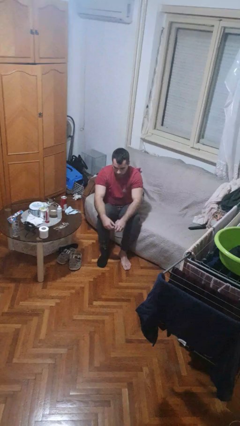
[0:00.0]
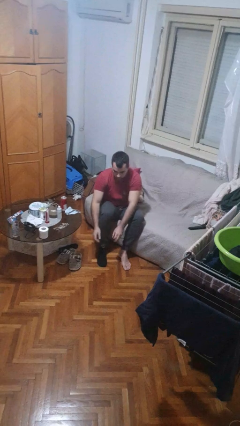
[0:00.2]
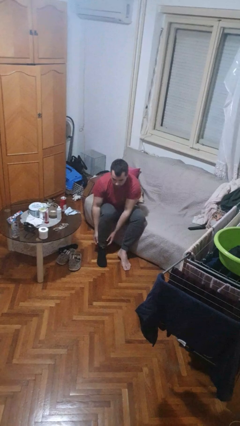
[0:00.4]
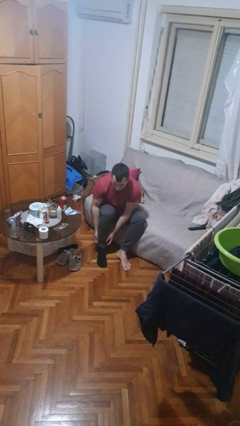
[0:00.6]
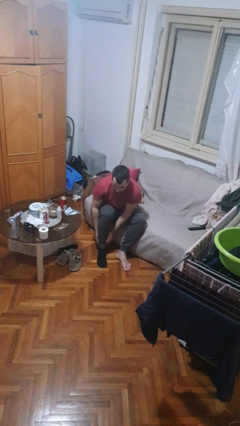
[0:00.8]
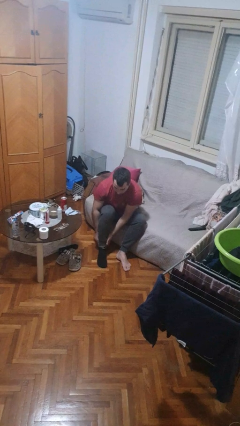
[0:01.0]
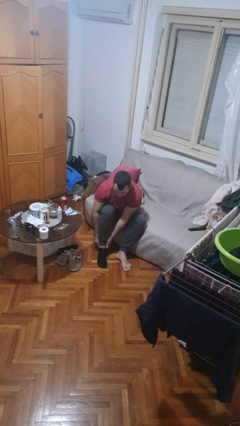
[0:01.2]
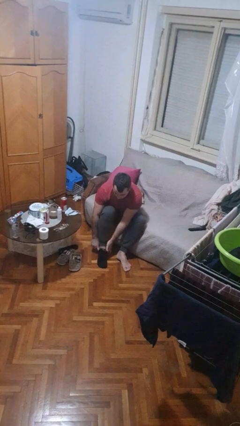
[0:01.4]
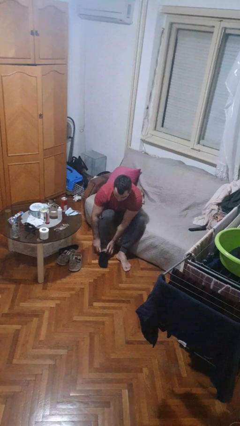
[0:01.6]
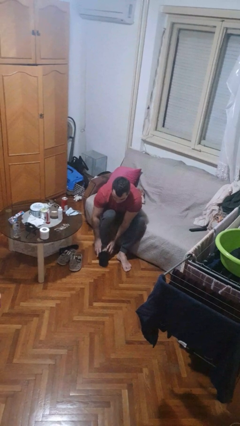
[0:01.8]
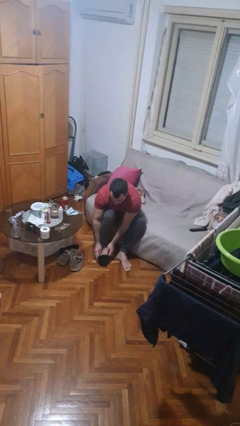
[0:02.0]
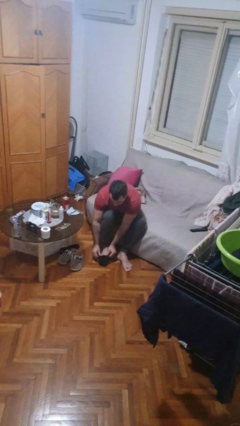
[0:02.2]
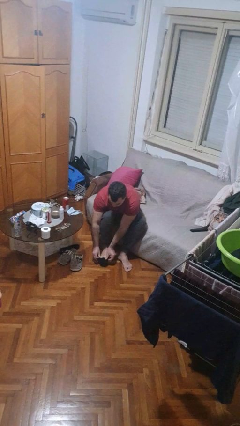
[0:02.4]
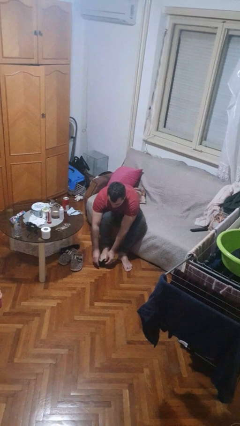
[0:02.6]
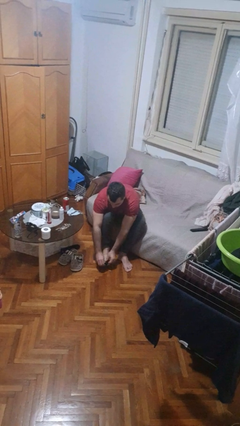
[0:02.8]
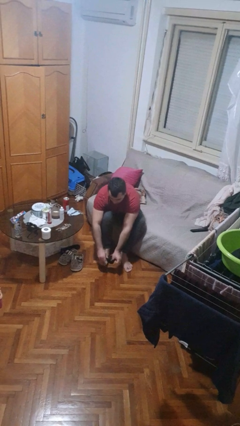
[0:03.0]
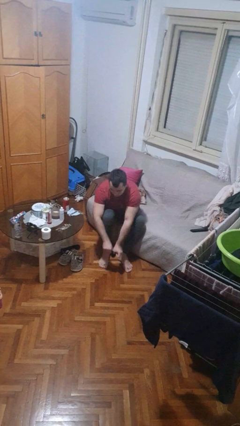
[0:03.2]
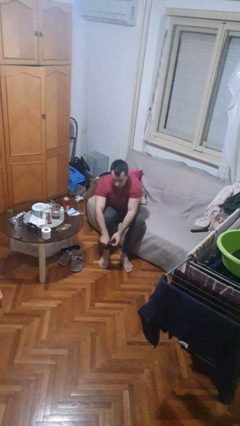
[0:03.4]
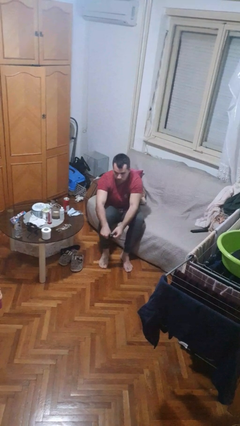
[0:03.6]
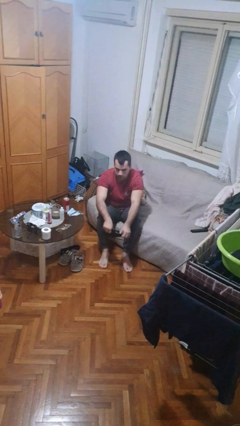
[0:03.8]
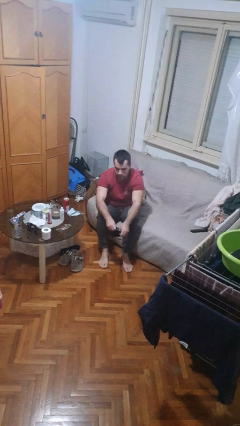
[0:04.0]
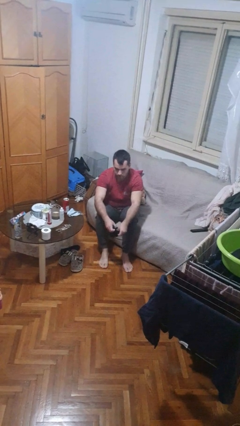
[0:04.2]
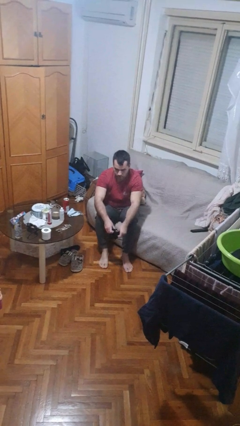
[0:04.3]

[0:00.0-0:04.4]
person takes off socks

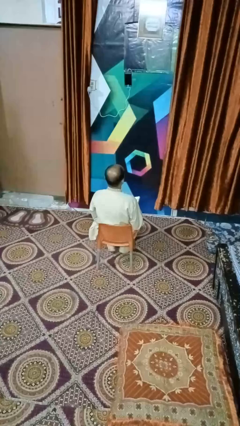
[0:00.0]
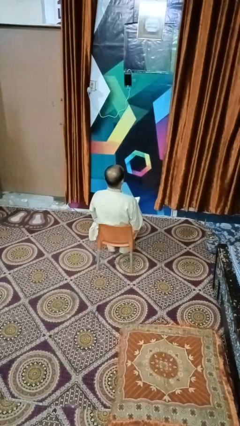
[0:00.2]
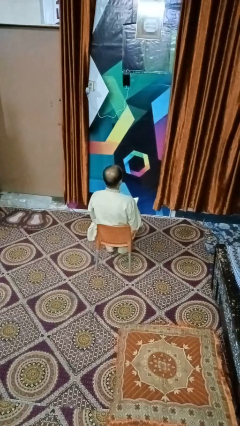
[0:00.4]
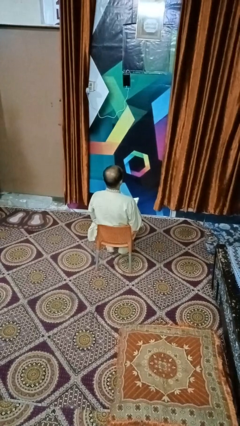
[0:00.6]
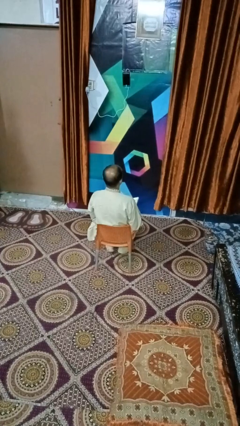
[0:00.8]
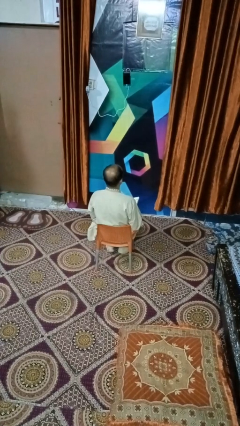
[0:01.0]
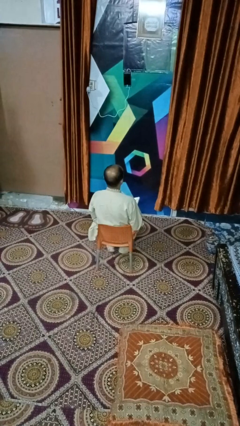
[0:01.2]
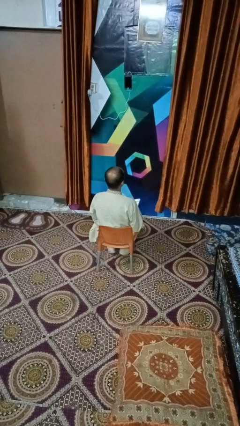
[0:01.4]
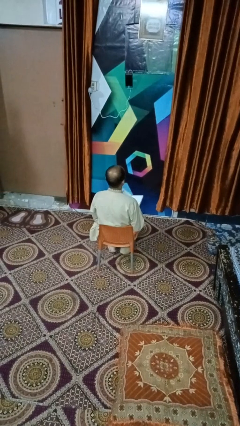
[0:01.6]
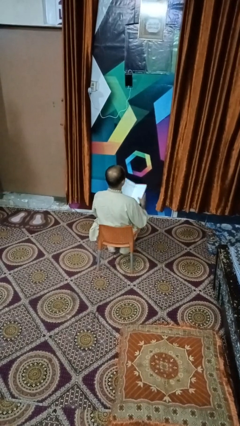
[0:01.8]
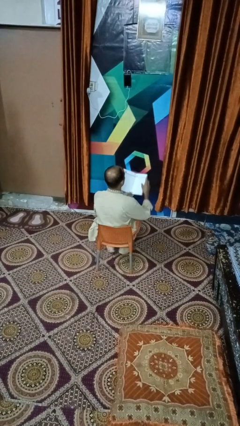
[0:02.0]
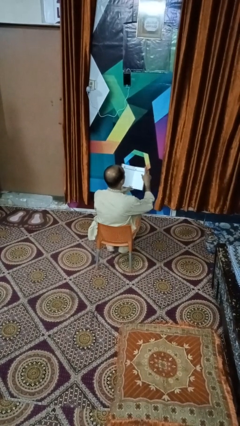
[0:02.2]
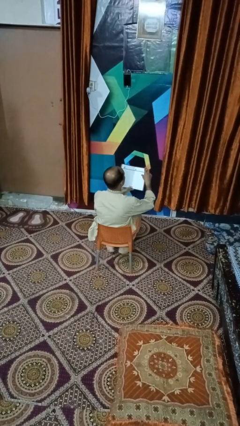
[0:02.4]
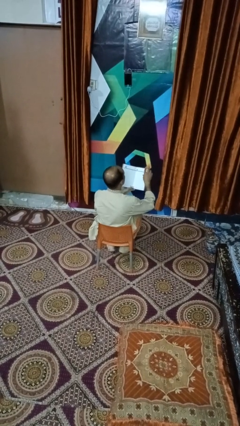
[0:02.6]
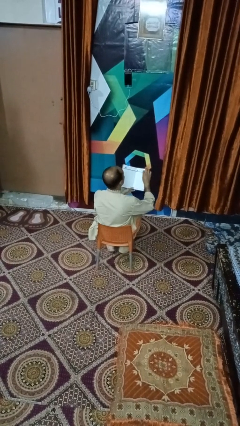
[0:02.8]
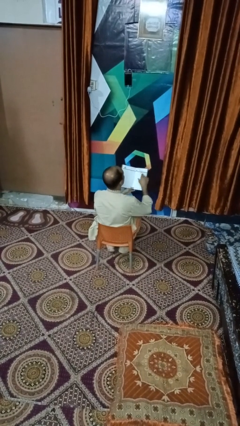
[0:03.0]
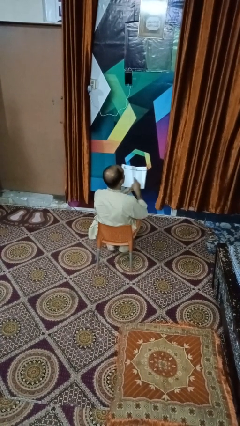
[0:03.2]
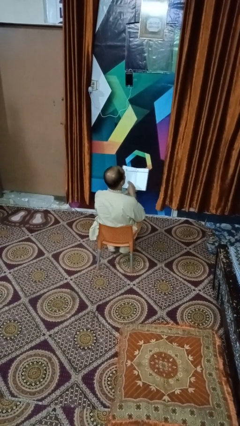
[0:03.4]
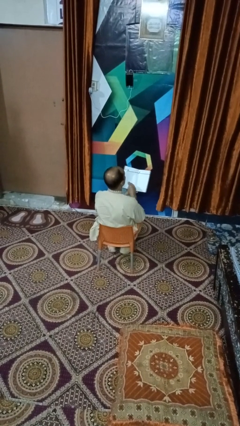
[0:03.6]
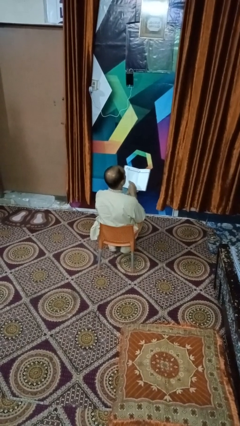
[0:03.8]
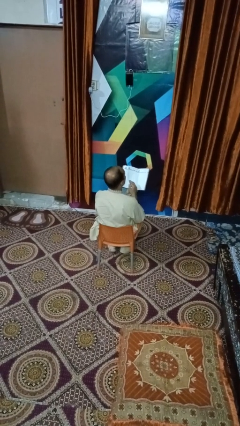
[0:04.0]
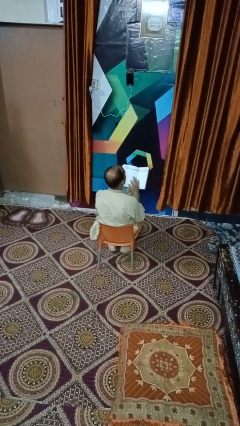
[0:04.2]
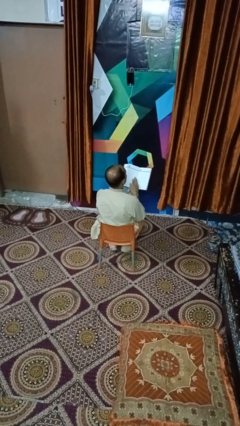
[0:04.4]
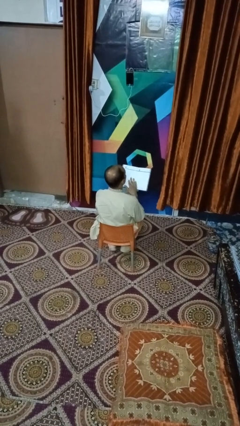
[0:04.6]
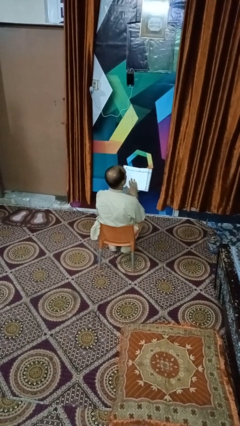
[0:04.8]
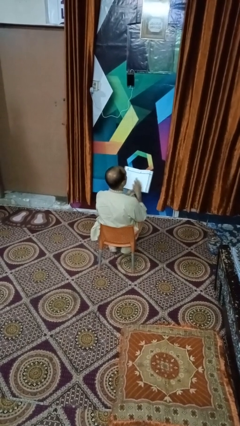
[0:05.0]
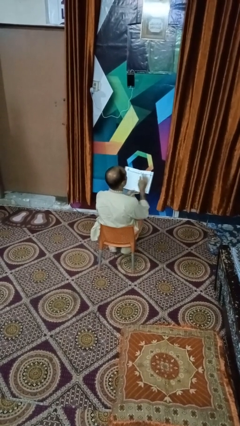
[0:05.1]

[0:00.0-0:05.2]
person reads magazine

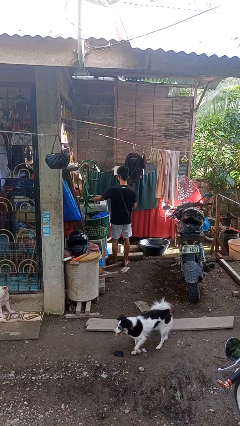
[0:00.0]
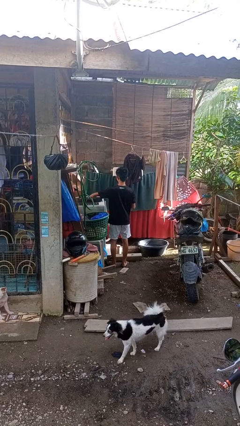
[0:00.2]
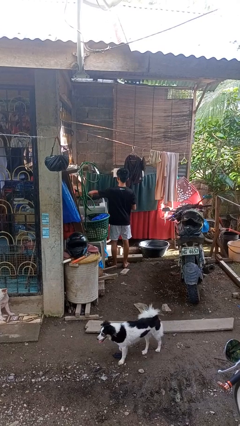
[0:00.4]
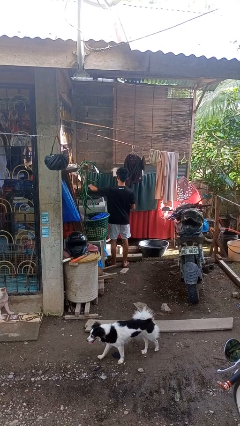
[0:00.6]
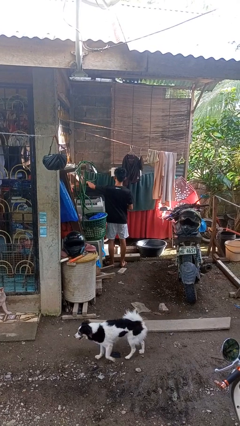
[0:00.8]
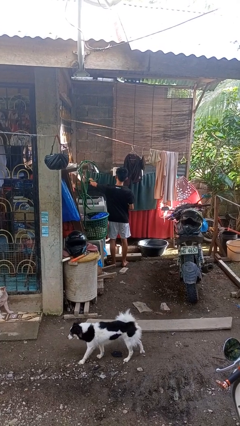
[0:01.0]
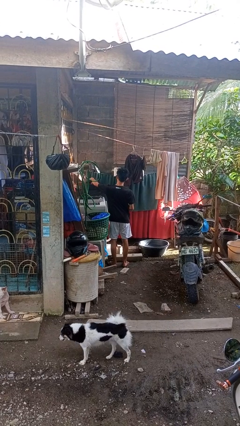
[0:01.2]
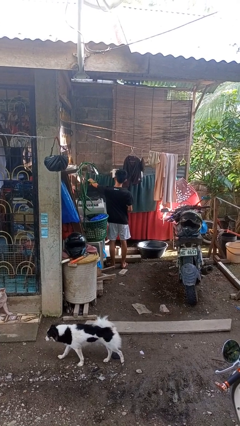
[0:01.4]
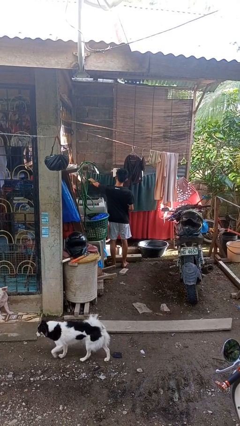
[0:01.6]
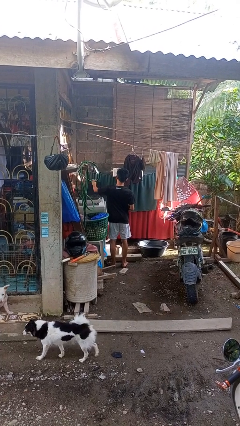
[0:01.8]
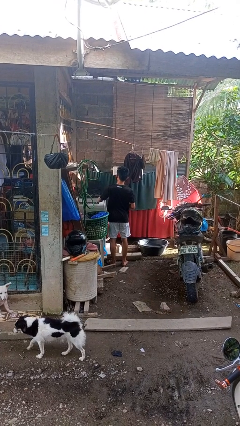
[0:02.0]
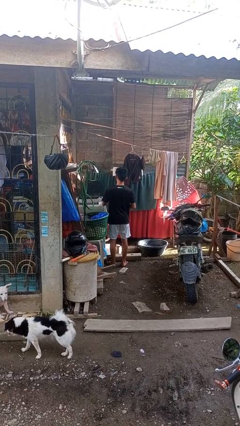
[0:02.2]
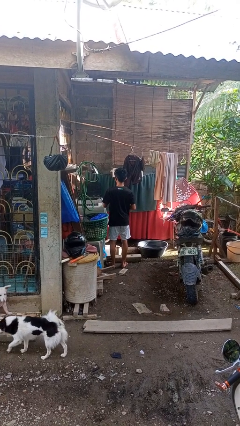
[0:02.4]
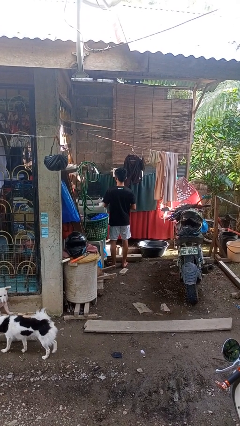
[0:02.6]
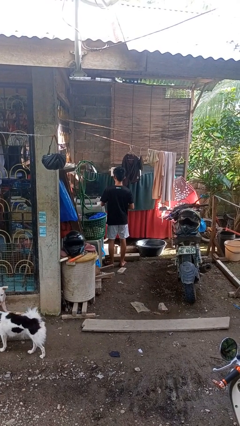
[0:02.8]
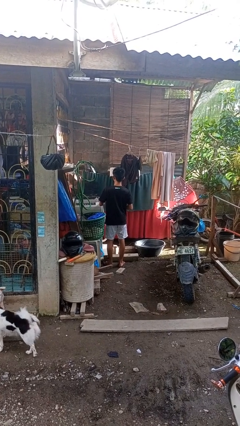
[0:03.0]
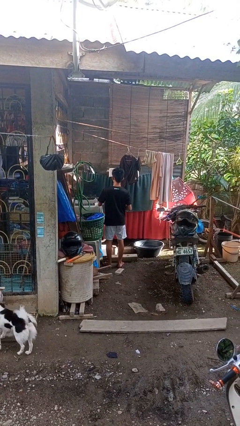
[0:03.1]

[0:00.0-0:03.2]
person opens clothes washer

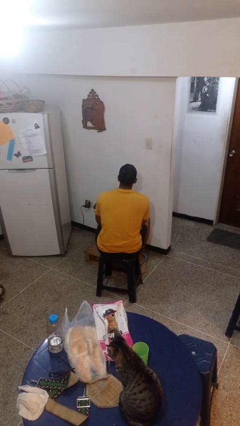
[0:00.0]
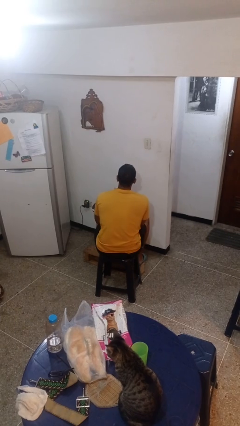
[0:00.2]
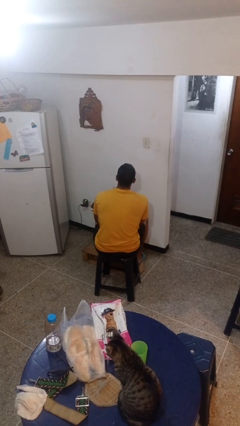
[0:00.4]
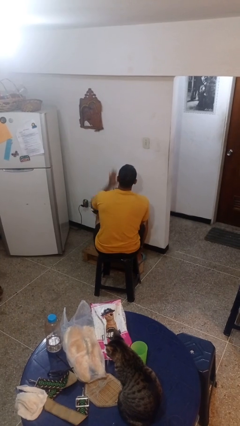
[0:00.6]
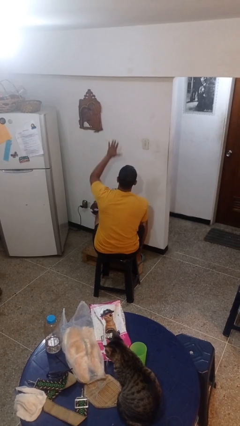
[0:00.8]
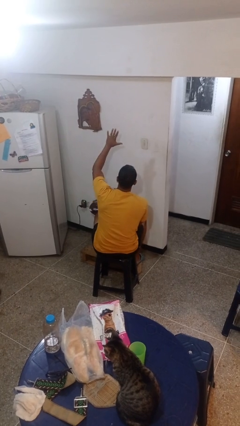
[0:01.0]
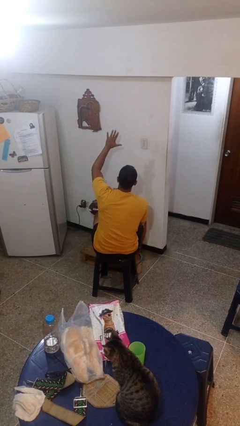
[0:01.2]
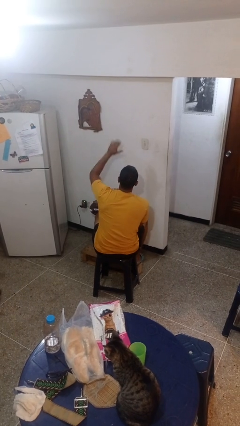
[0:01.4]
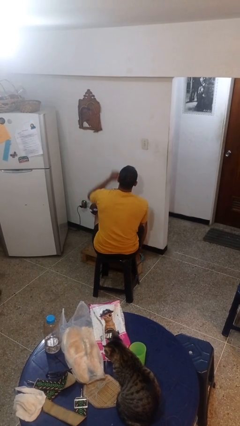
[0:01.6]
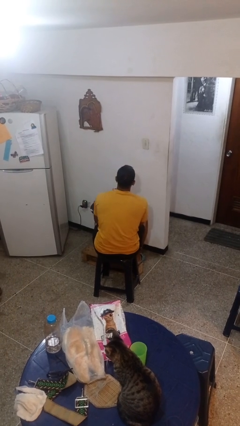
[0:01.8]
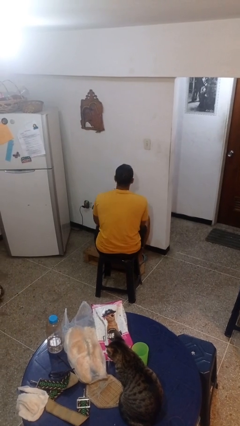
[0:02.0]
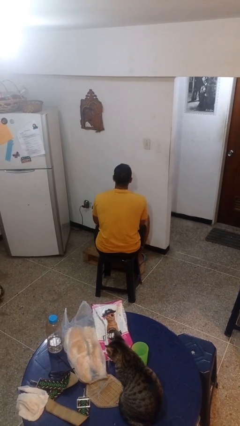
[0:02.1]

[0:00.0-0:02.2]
person gestures number five

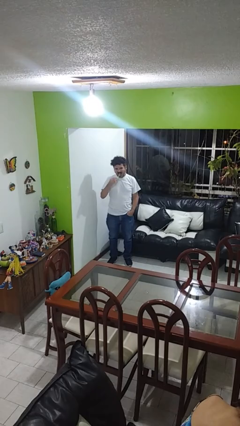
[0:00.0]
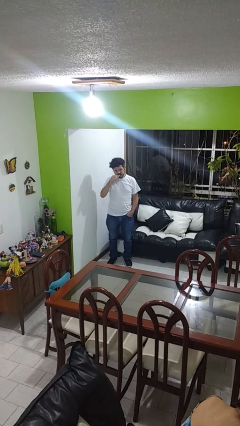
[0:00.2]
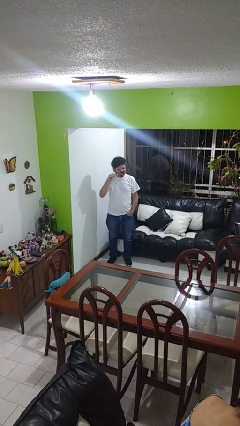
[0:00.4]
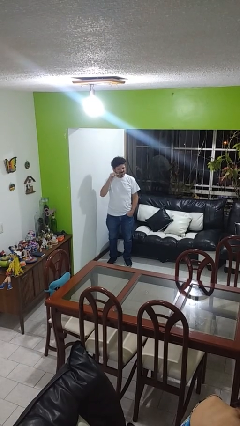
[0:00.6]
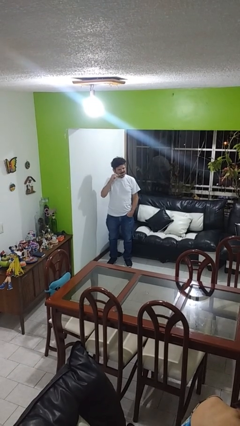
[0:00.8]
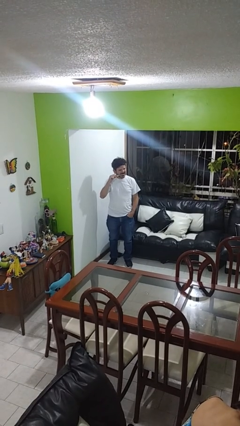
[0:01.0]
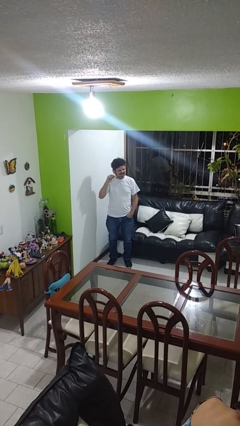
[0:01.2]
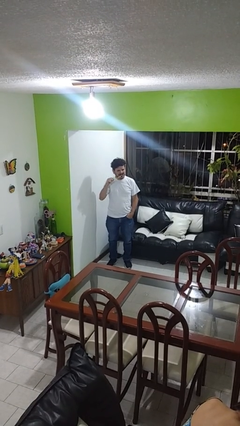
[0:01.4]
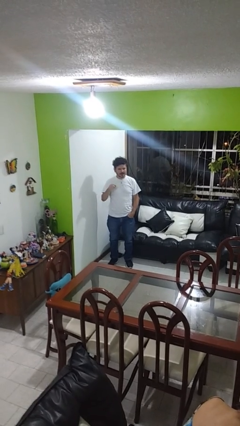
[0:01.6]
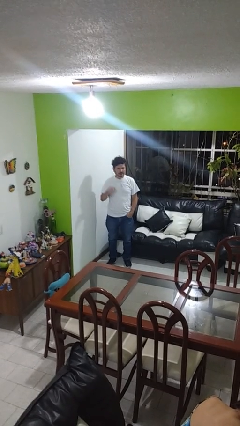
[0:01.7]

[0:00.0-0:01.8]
person brushes teeth

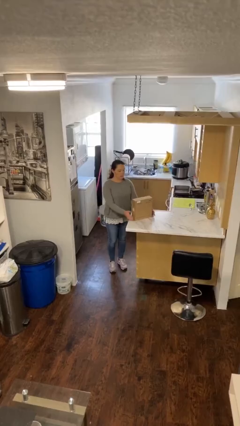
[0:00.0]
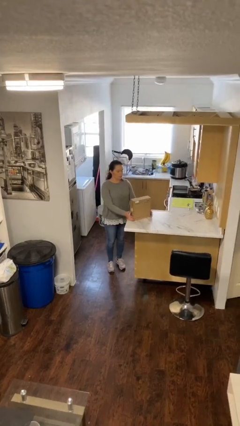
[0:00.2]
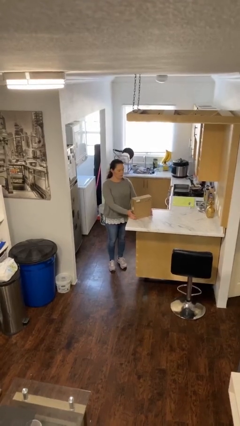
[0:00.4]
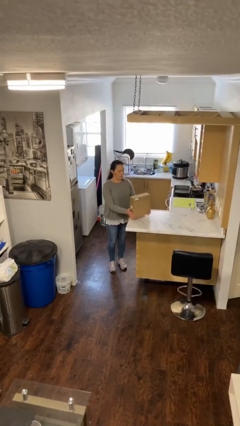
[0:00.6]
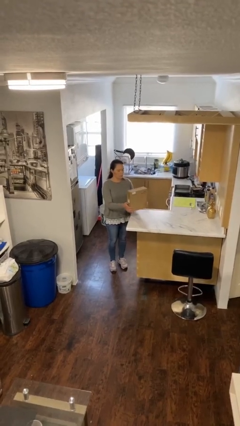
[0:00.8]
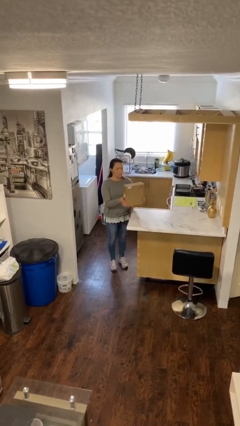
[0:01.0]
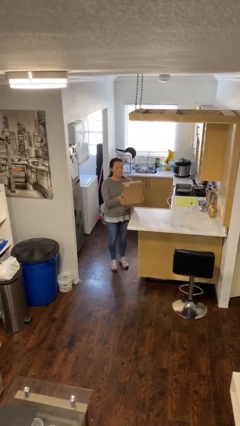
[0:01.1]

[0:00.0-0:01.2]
person picks up object from table
